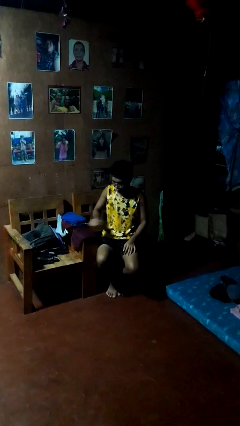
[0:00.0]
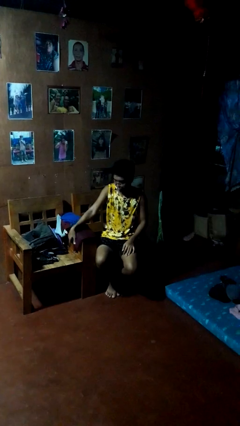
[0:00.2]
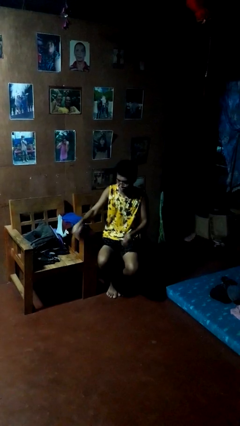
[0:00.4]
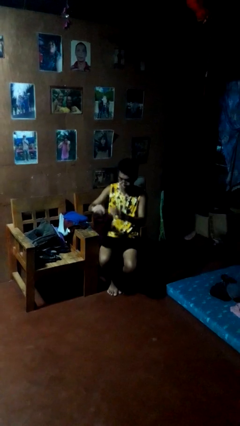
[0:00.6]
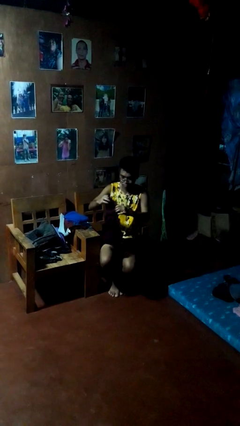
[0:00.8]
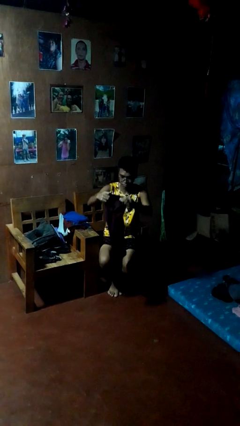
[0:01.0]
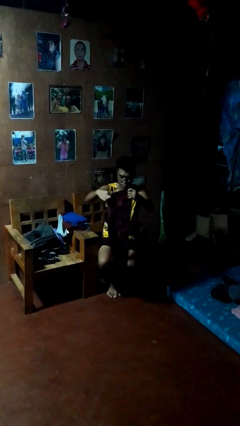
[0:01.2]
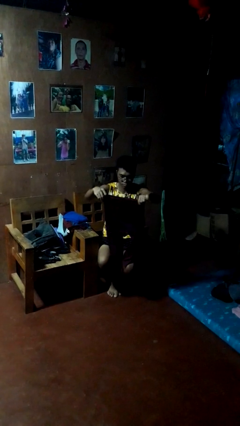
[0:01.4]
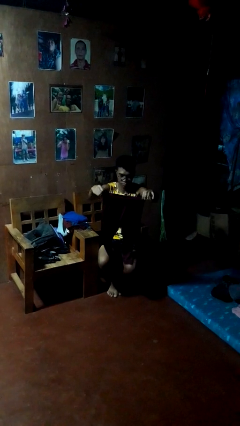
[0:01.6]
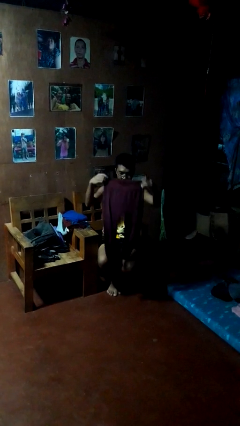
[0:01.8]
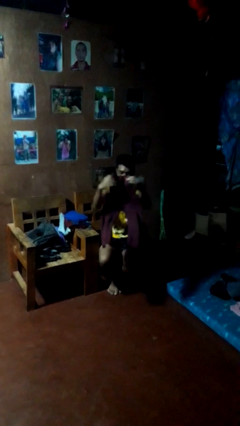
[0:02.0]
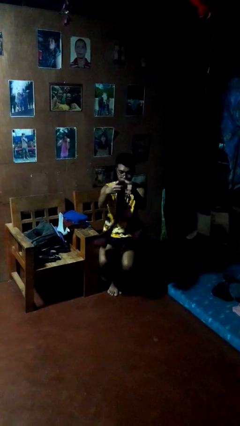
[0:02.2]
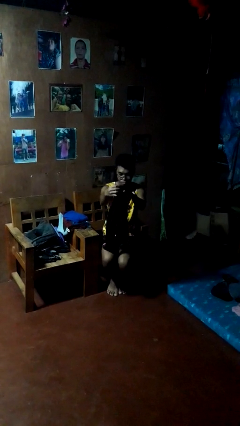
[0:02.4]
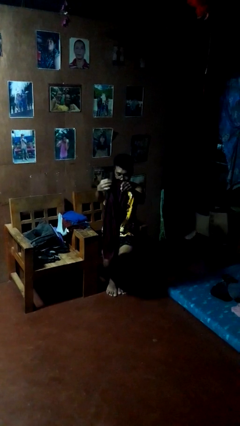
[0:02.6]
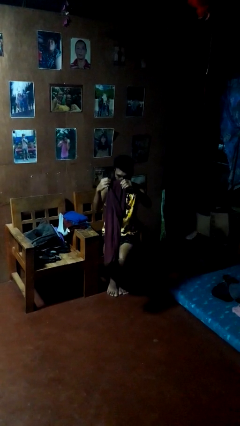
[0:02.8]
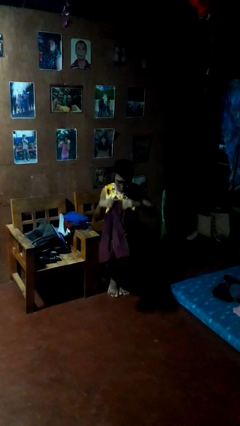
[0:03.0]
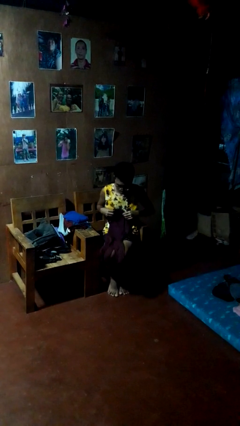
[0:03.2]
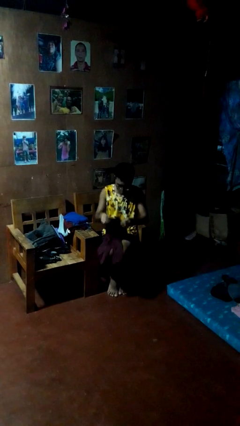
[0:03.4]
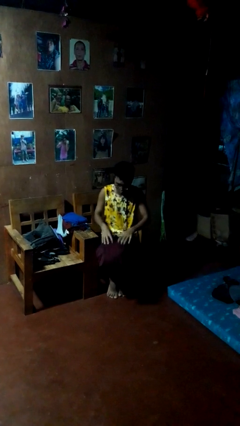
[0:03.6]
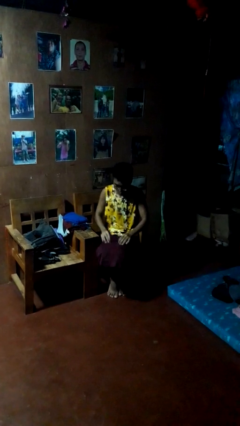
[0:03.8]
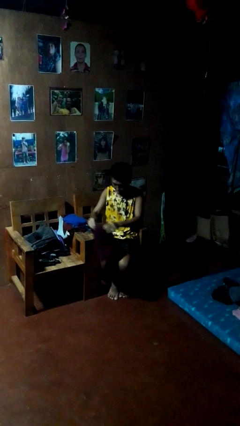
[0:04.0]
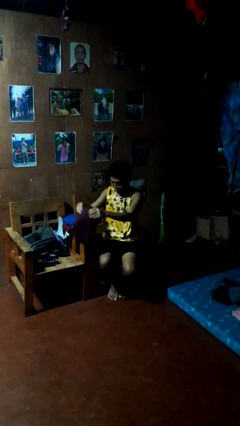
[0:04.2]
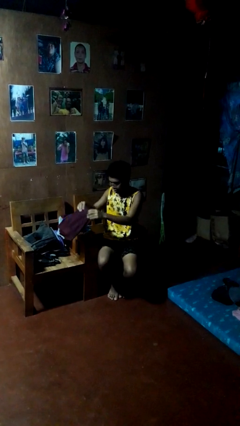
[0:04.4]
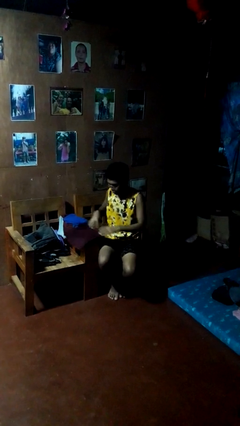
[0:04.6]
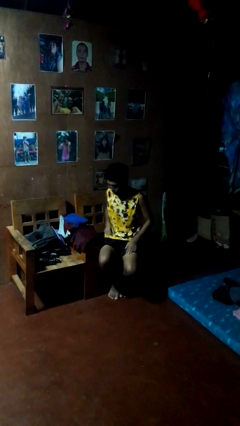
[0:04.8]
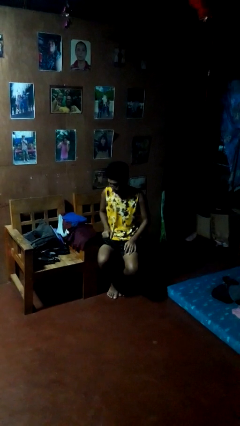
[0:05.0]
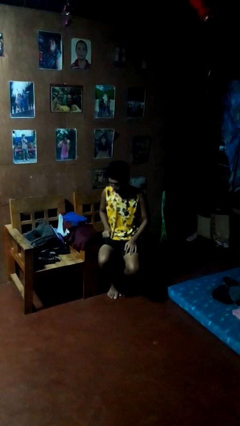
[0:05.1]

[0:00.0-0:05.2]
person folds pants

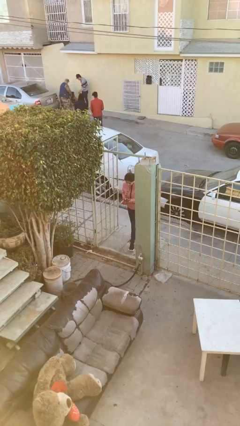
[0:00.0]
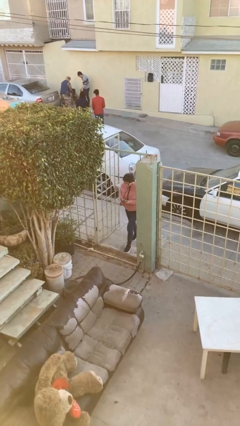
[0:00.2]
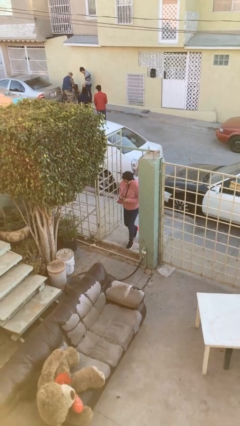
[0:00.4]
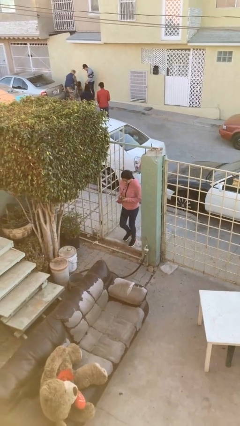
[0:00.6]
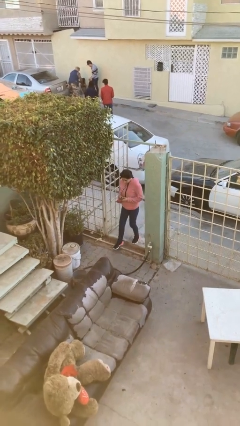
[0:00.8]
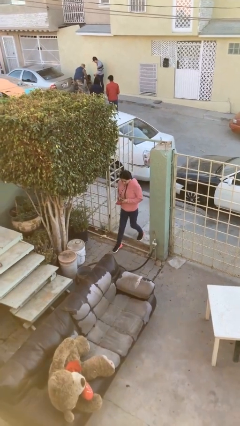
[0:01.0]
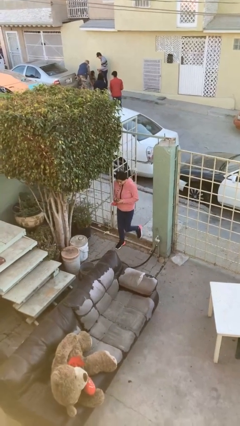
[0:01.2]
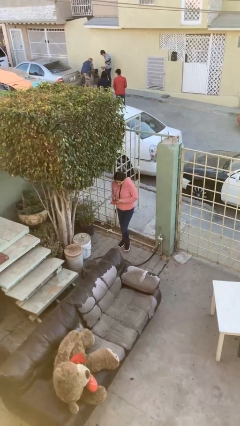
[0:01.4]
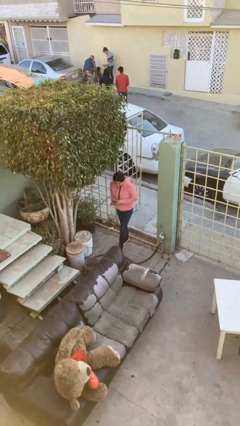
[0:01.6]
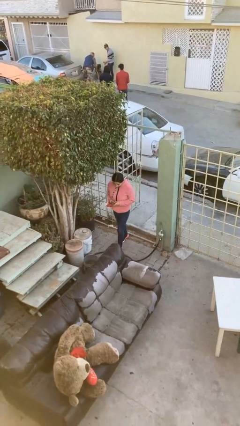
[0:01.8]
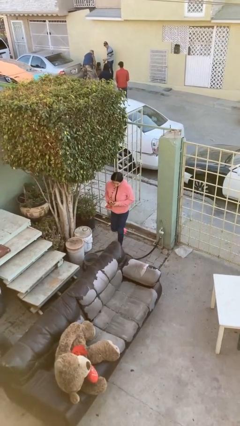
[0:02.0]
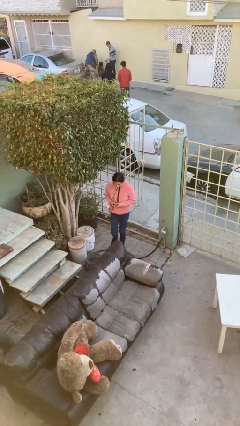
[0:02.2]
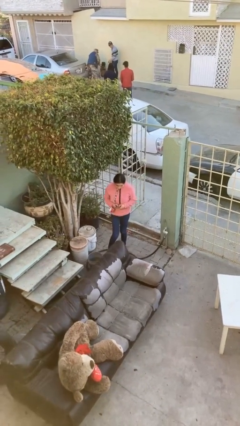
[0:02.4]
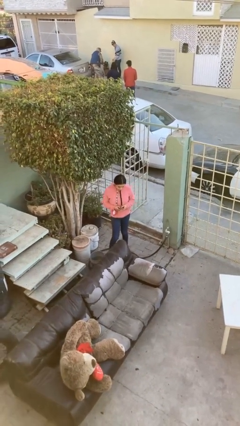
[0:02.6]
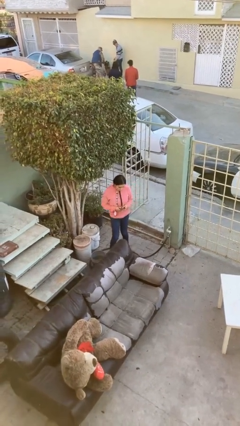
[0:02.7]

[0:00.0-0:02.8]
person enters scene through structure

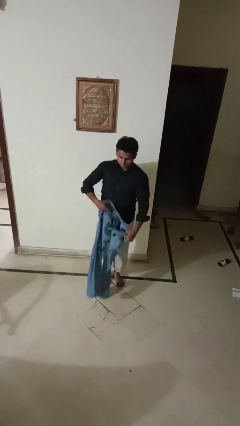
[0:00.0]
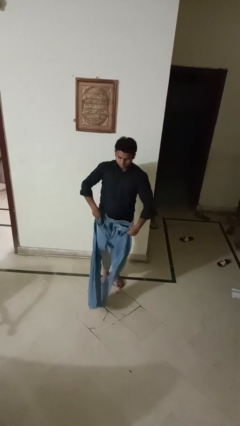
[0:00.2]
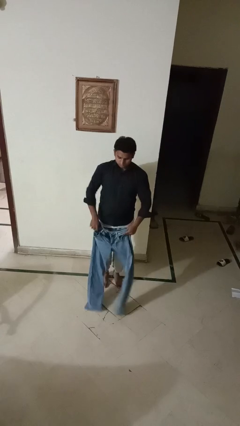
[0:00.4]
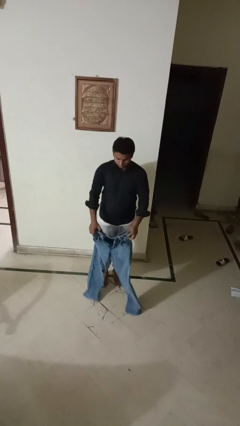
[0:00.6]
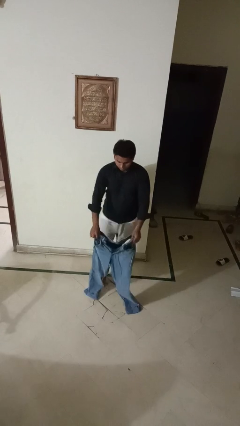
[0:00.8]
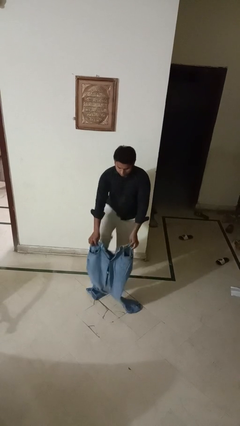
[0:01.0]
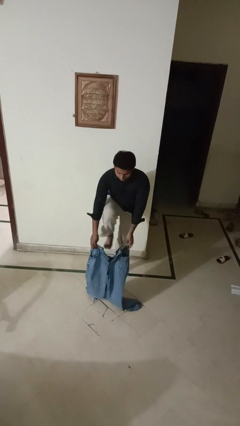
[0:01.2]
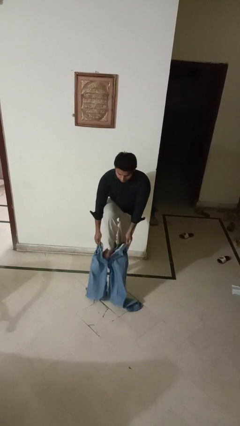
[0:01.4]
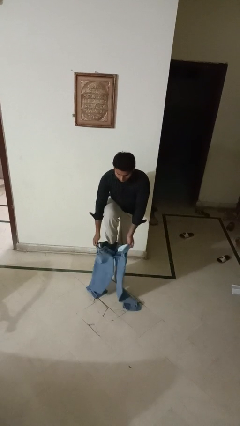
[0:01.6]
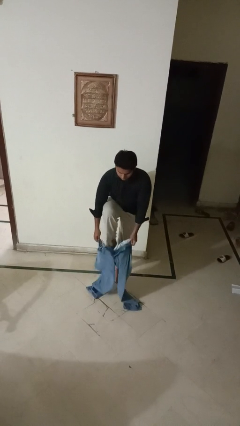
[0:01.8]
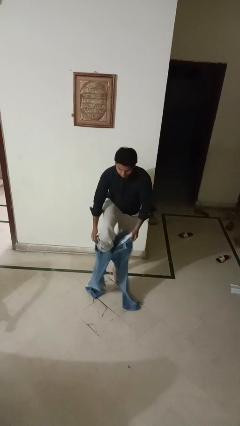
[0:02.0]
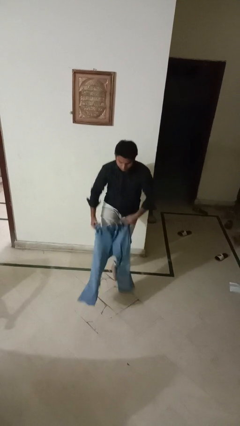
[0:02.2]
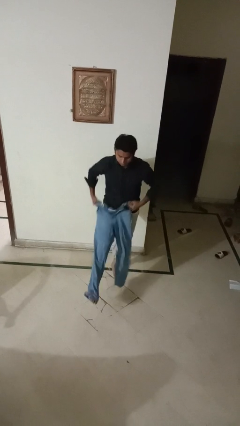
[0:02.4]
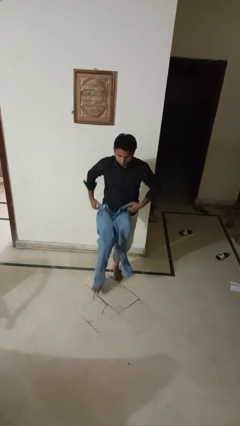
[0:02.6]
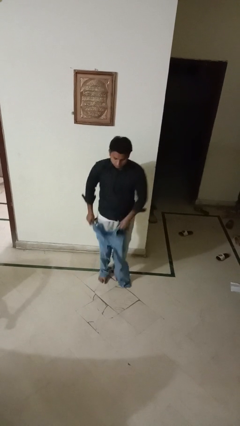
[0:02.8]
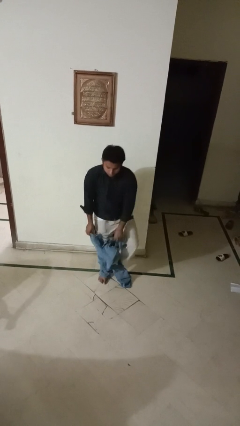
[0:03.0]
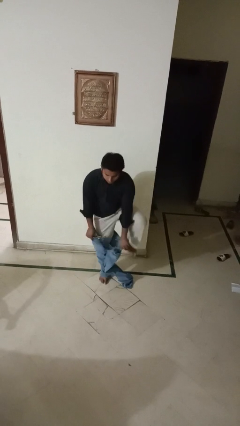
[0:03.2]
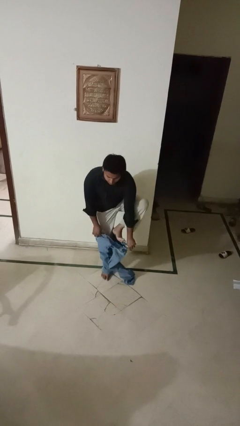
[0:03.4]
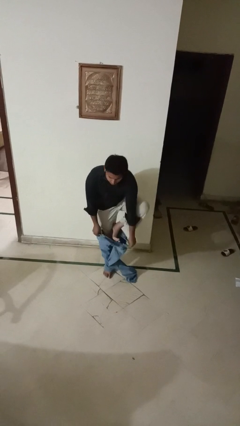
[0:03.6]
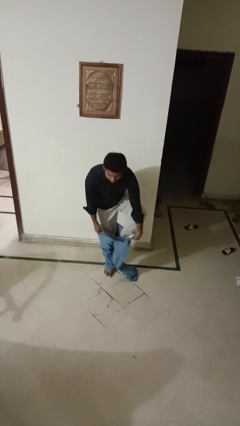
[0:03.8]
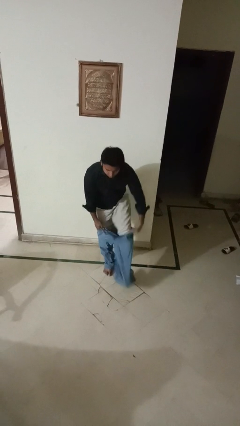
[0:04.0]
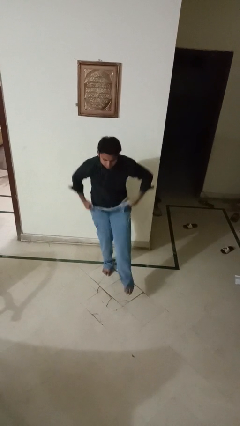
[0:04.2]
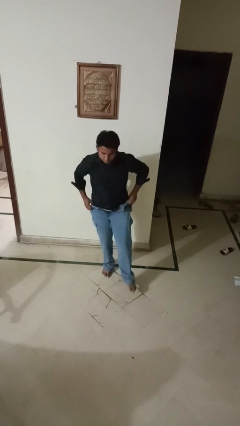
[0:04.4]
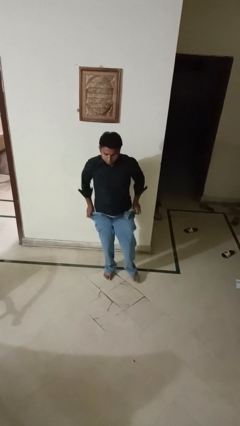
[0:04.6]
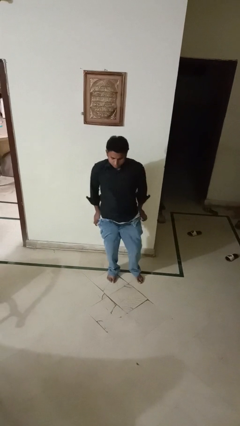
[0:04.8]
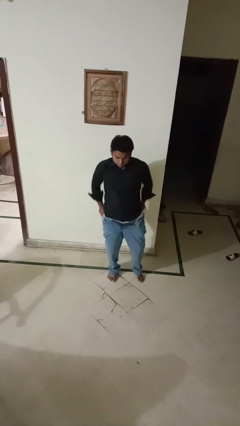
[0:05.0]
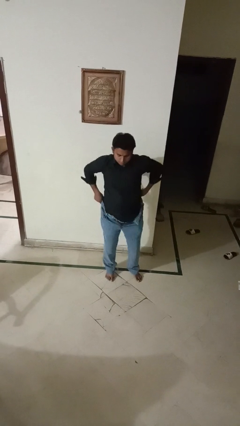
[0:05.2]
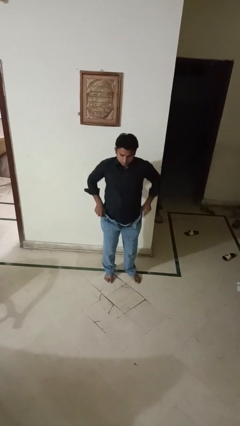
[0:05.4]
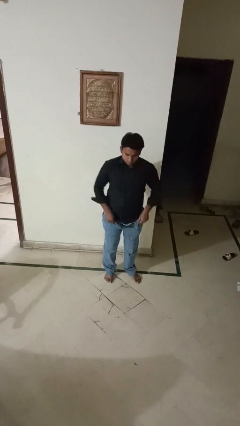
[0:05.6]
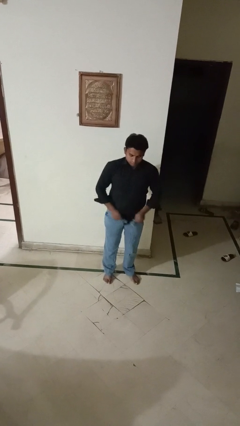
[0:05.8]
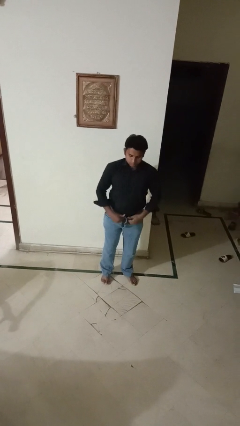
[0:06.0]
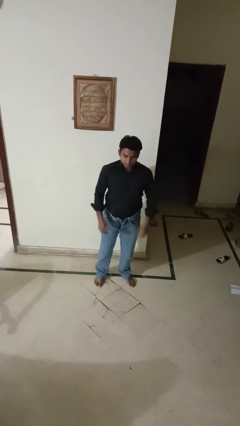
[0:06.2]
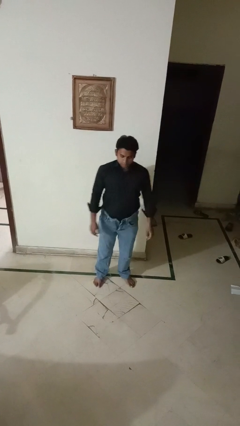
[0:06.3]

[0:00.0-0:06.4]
person puts on pants

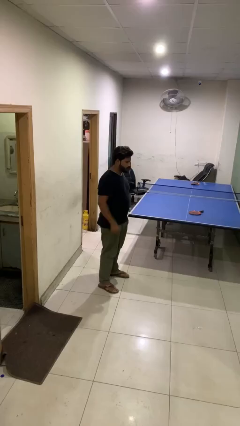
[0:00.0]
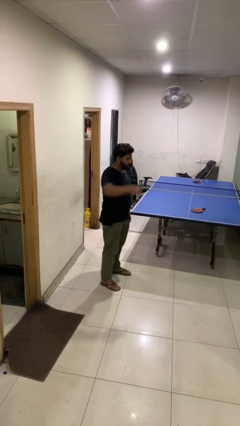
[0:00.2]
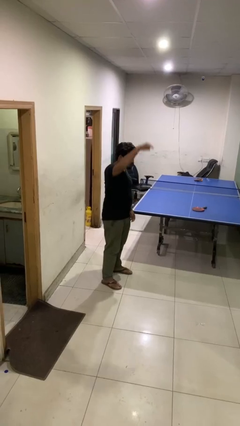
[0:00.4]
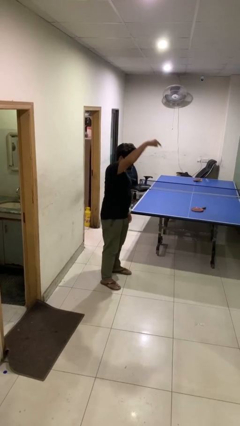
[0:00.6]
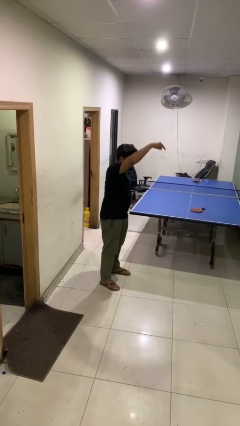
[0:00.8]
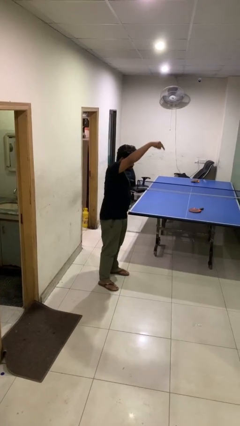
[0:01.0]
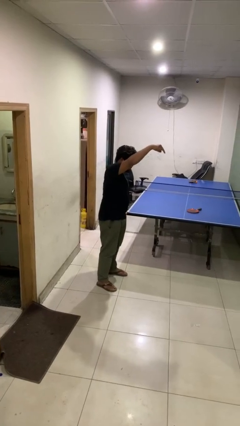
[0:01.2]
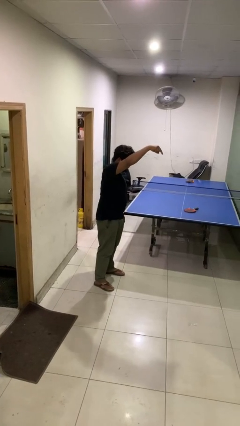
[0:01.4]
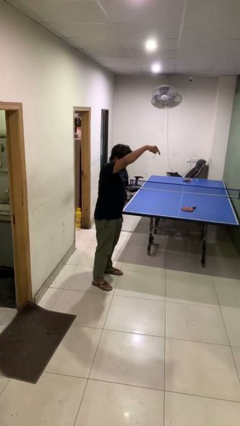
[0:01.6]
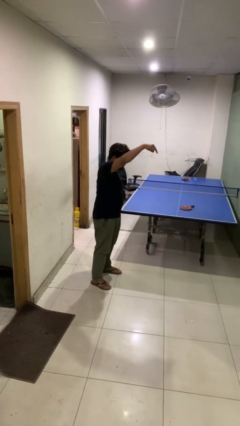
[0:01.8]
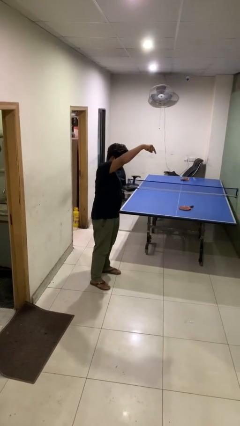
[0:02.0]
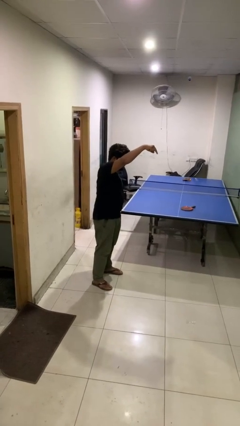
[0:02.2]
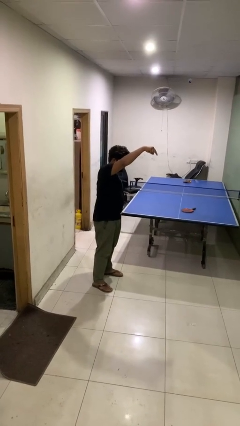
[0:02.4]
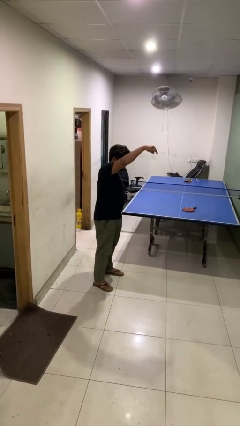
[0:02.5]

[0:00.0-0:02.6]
person points at person

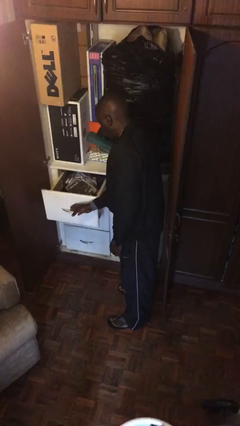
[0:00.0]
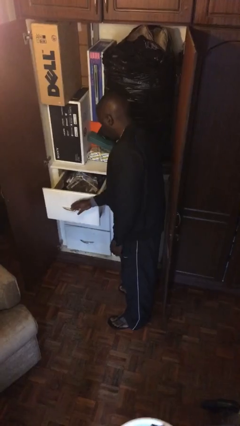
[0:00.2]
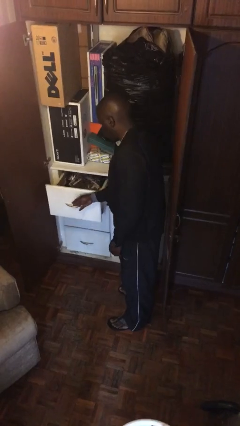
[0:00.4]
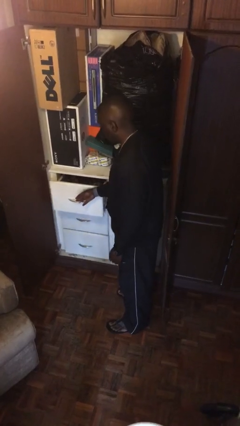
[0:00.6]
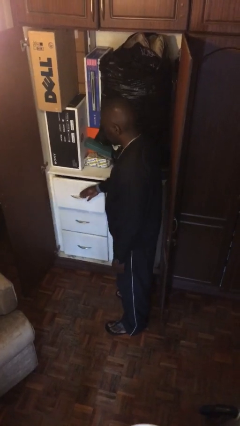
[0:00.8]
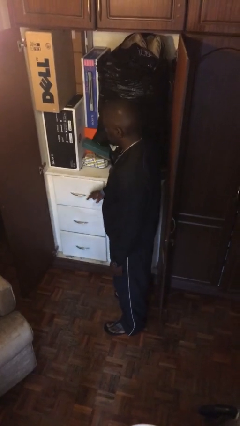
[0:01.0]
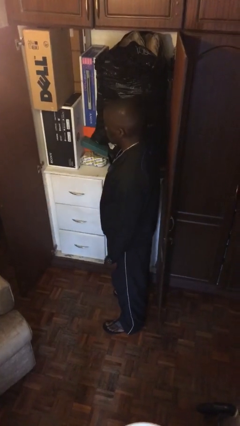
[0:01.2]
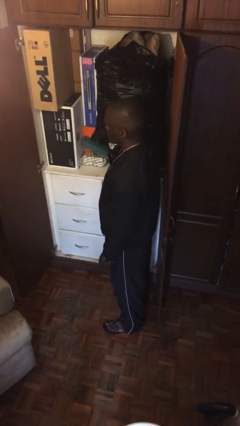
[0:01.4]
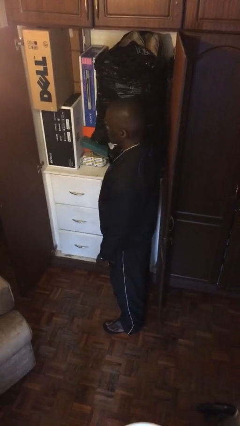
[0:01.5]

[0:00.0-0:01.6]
person closes dresser drawer
